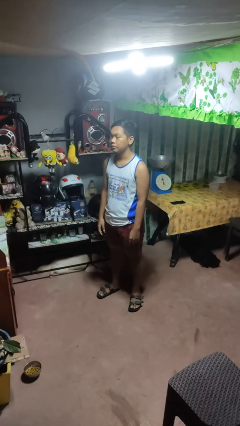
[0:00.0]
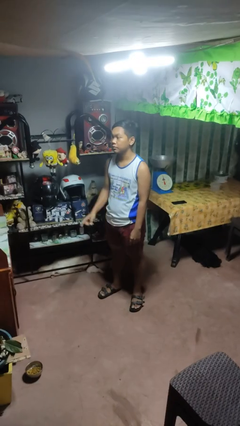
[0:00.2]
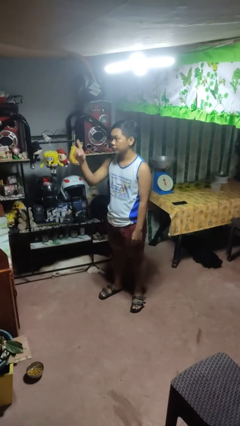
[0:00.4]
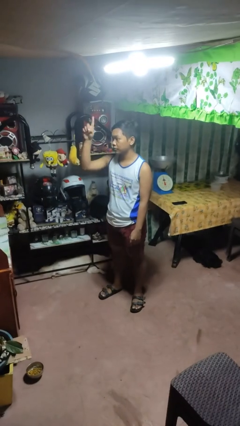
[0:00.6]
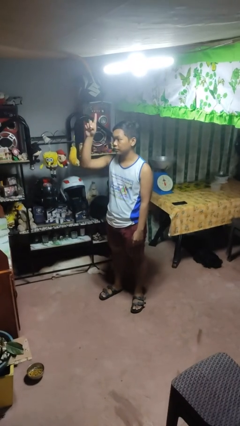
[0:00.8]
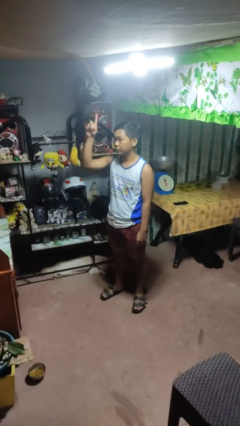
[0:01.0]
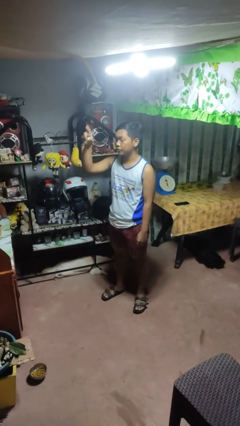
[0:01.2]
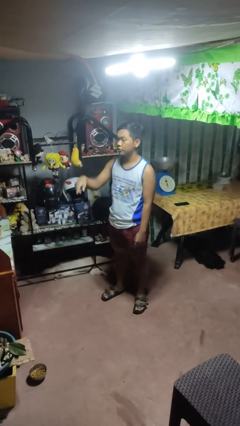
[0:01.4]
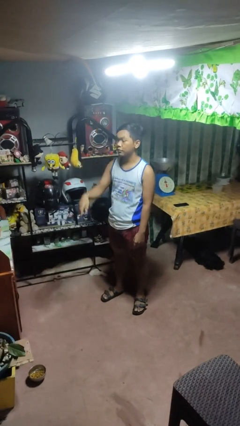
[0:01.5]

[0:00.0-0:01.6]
person gestures number one

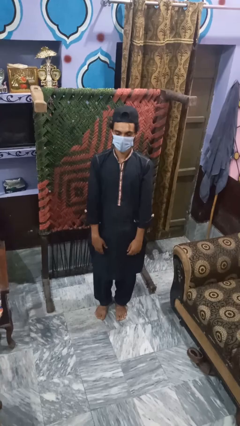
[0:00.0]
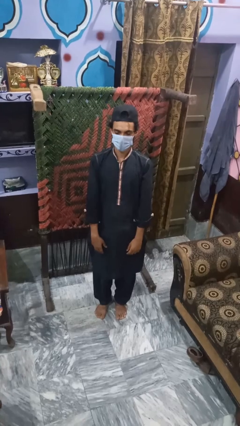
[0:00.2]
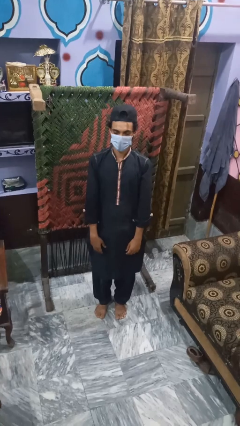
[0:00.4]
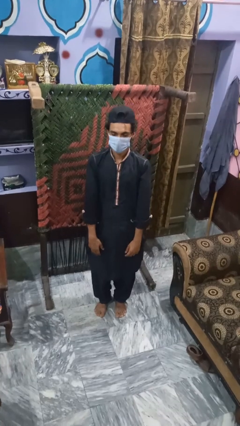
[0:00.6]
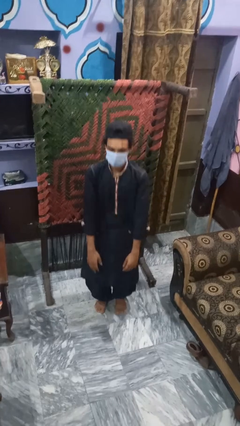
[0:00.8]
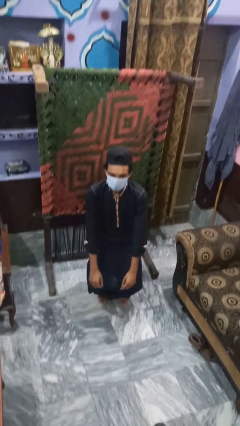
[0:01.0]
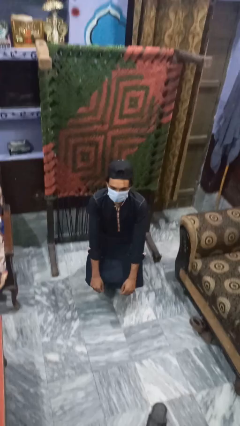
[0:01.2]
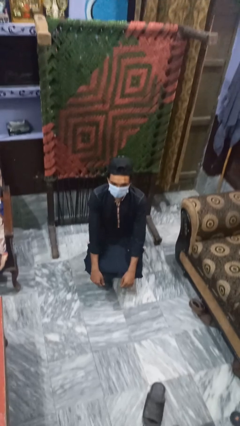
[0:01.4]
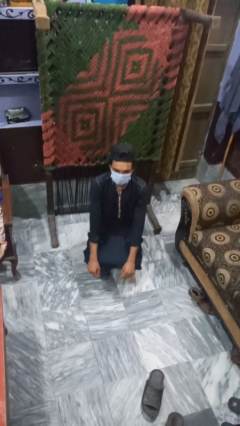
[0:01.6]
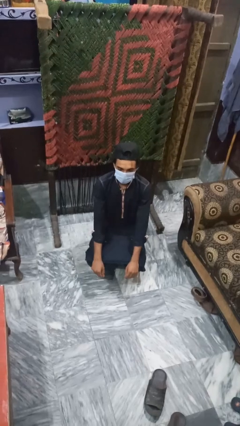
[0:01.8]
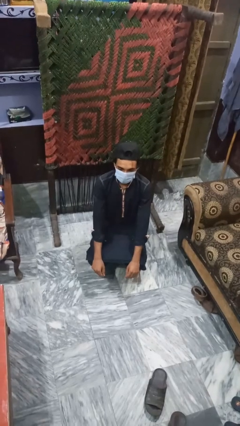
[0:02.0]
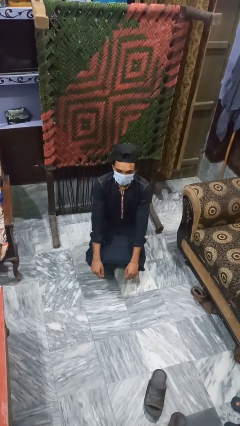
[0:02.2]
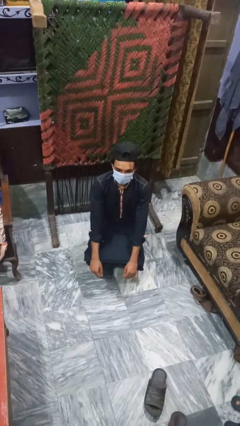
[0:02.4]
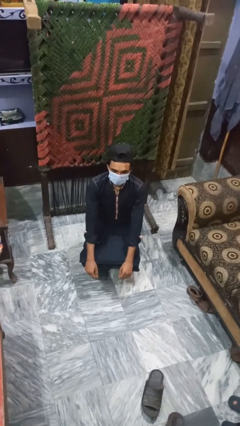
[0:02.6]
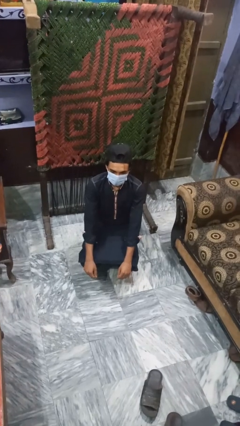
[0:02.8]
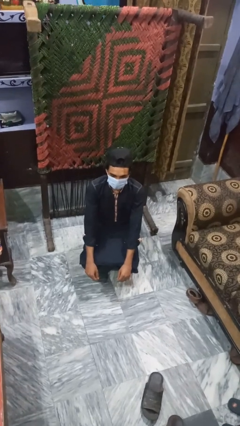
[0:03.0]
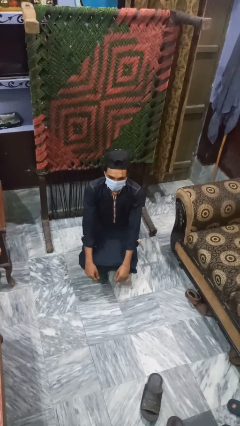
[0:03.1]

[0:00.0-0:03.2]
person squats

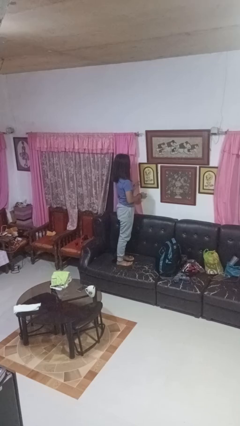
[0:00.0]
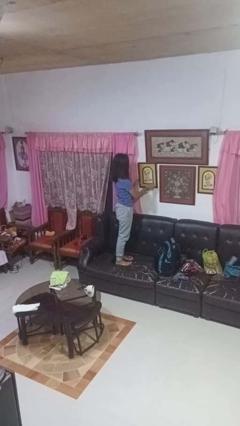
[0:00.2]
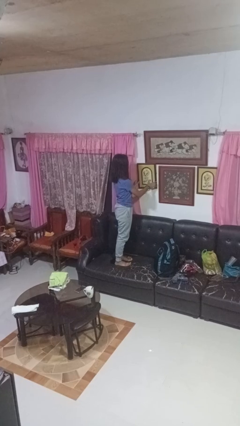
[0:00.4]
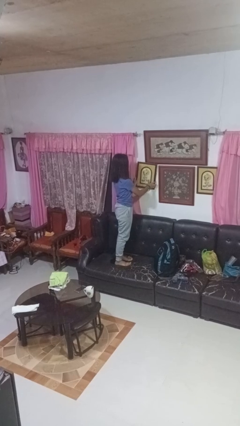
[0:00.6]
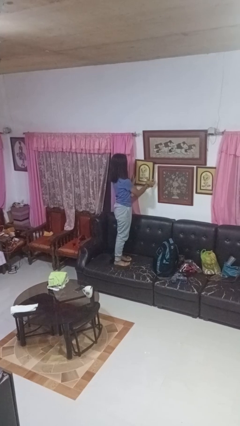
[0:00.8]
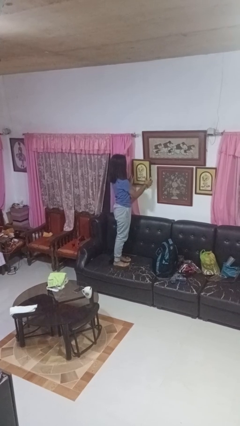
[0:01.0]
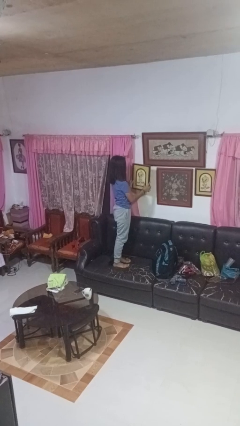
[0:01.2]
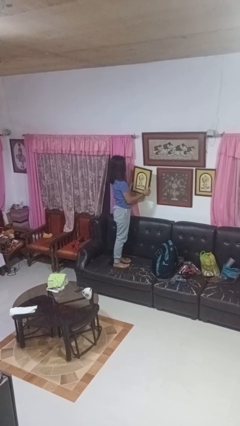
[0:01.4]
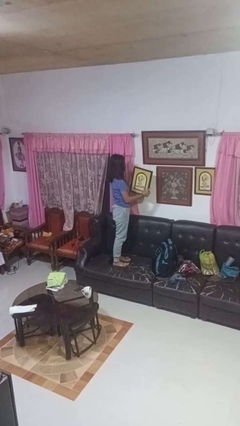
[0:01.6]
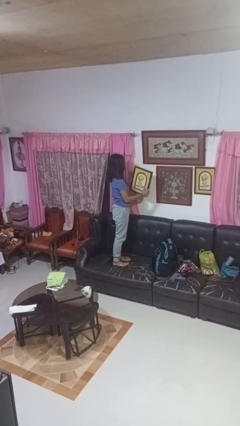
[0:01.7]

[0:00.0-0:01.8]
person takes down picture frame

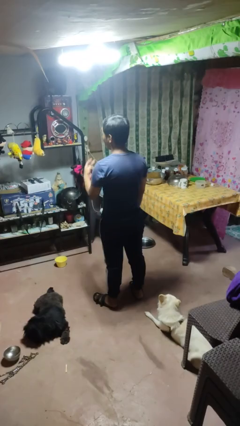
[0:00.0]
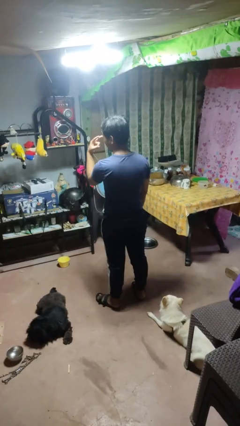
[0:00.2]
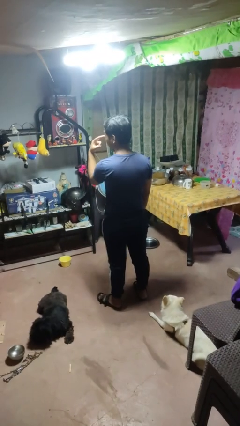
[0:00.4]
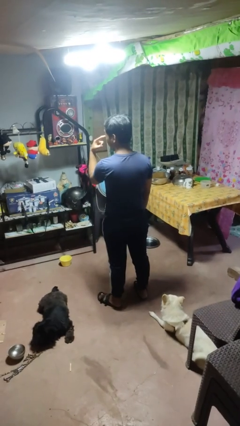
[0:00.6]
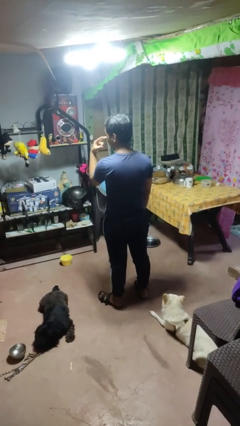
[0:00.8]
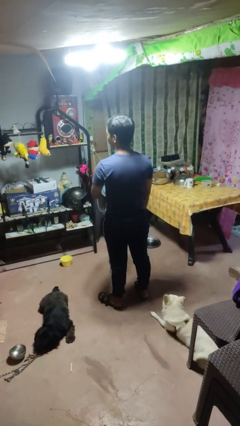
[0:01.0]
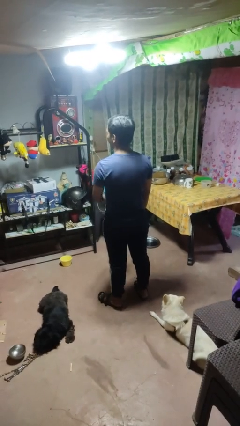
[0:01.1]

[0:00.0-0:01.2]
person gestures watch closely

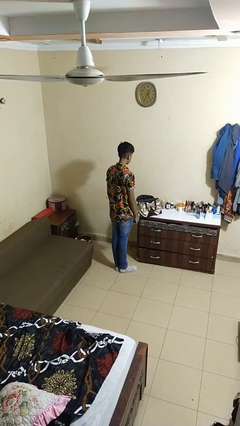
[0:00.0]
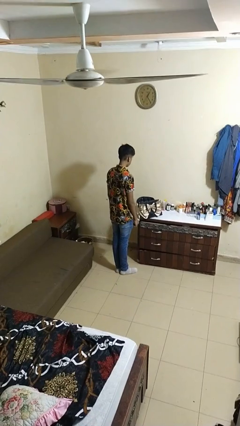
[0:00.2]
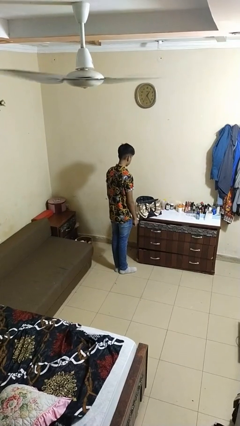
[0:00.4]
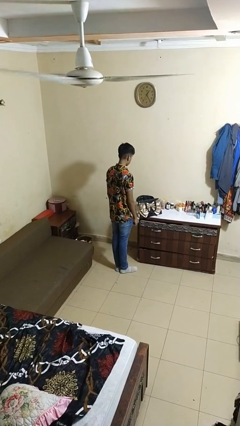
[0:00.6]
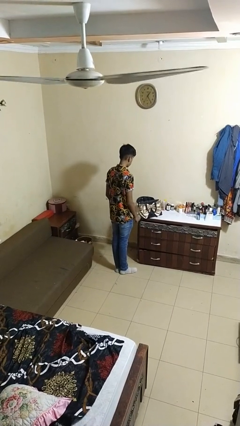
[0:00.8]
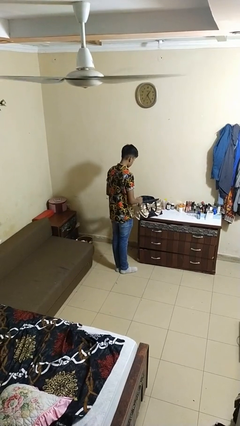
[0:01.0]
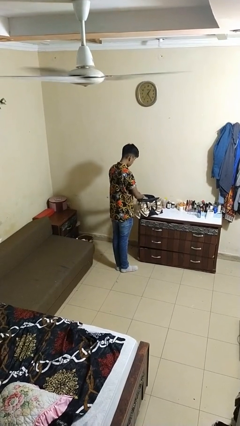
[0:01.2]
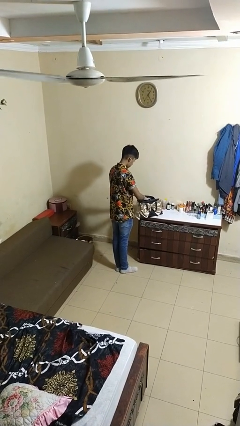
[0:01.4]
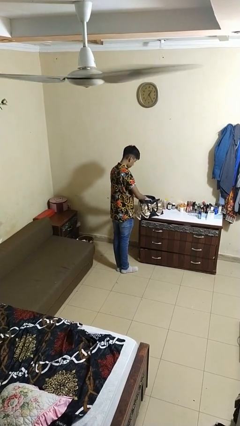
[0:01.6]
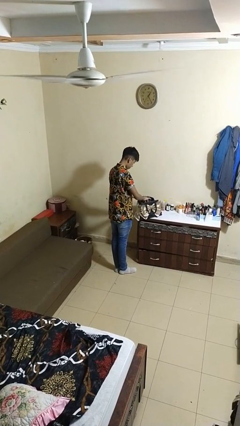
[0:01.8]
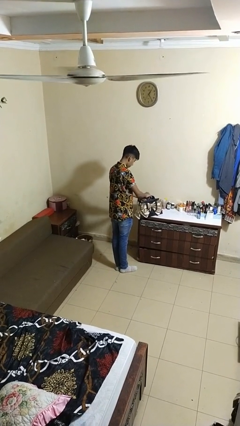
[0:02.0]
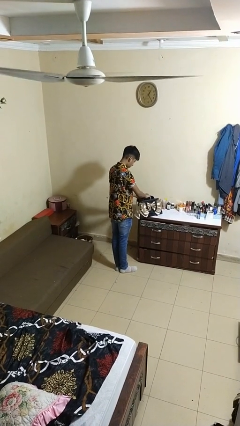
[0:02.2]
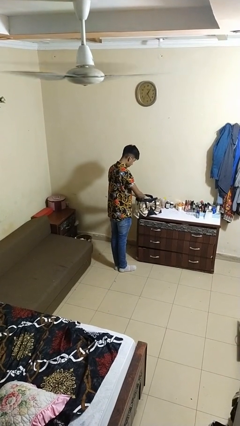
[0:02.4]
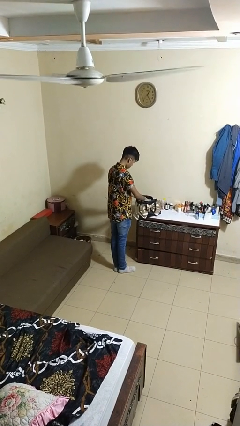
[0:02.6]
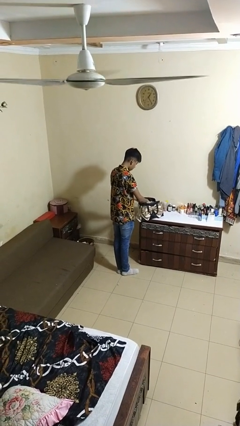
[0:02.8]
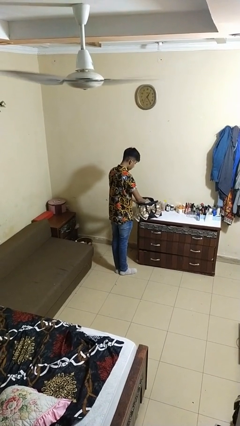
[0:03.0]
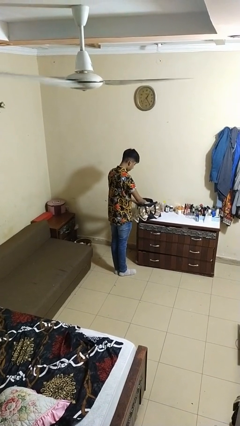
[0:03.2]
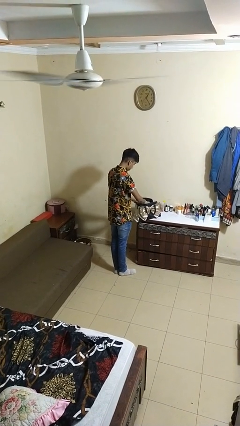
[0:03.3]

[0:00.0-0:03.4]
person searches in purse

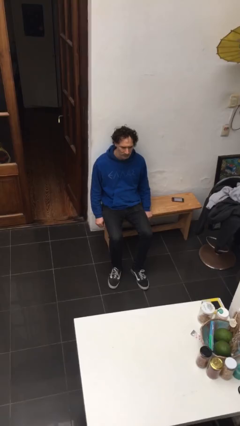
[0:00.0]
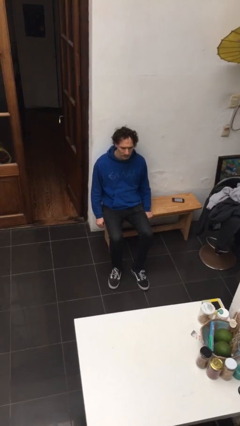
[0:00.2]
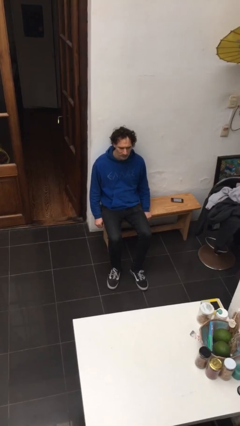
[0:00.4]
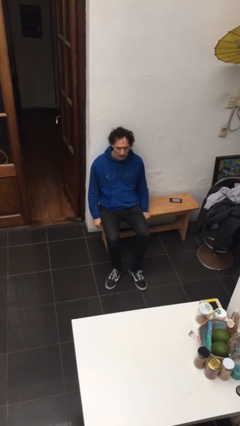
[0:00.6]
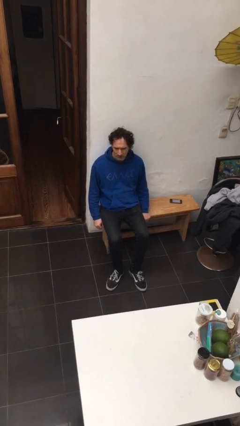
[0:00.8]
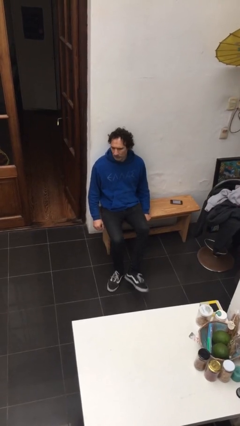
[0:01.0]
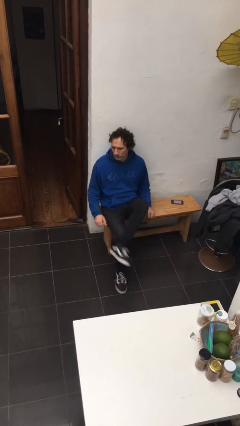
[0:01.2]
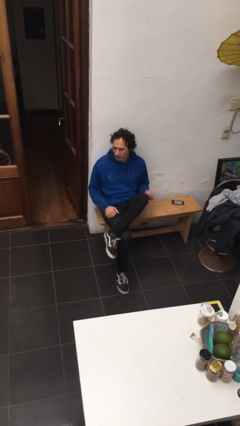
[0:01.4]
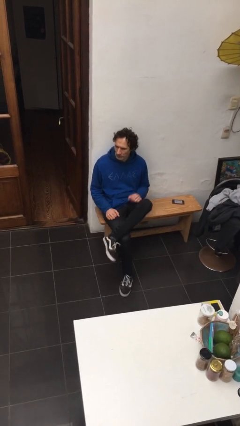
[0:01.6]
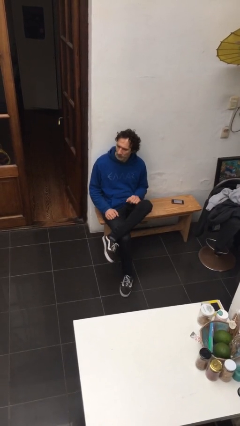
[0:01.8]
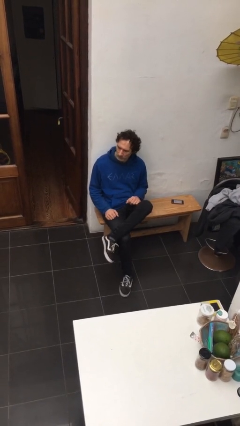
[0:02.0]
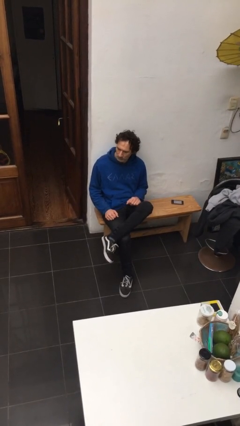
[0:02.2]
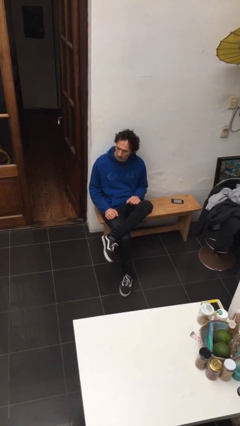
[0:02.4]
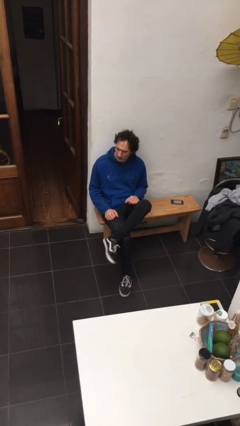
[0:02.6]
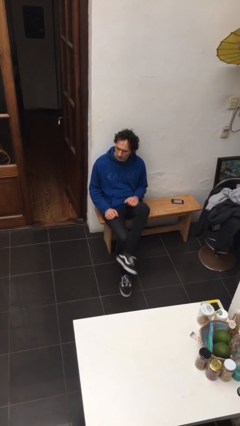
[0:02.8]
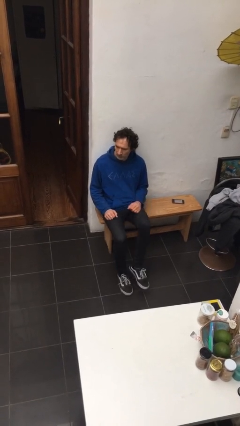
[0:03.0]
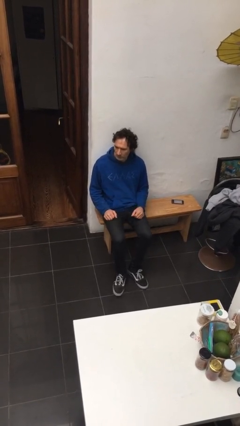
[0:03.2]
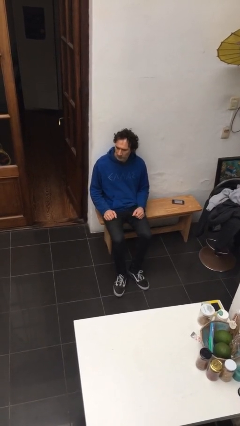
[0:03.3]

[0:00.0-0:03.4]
person crosses legs

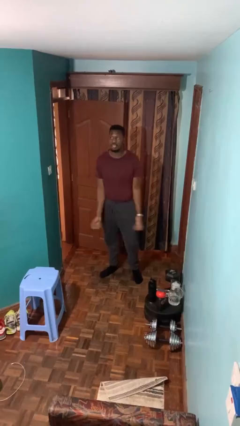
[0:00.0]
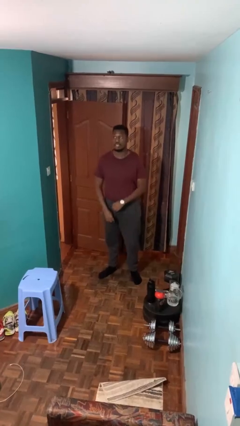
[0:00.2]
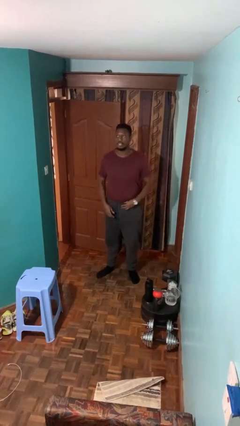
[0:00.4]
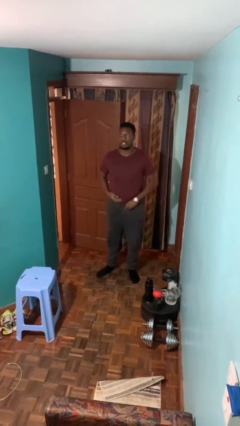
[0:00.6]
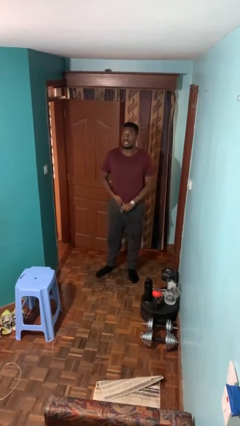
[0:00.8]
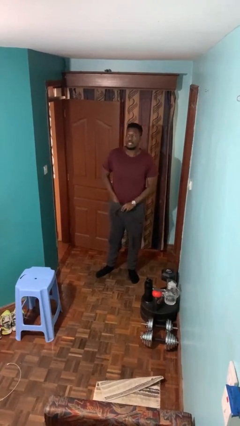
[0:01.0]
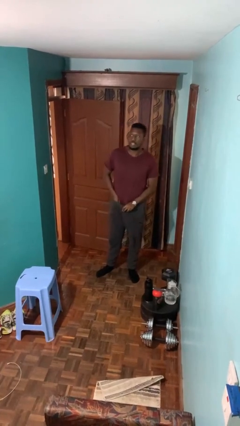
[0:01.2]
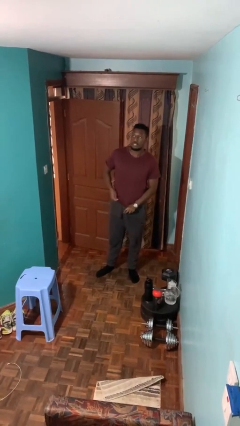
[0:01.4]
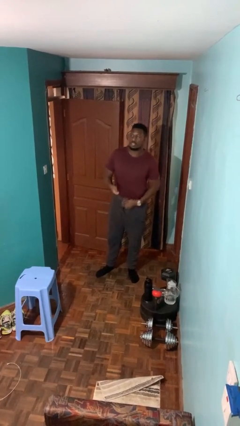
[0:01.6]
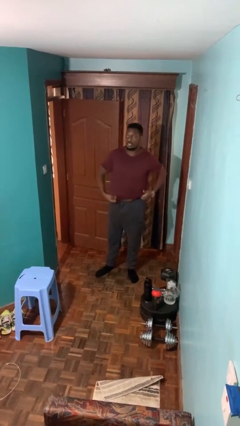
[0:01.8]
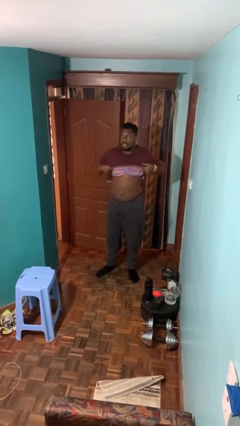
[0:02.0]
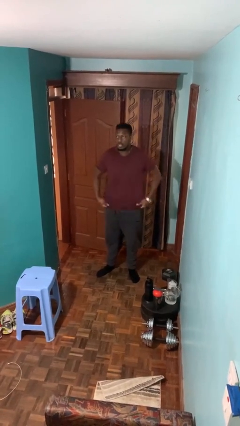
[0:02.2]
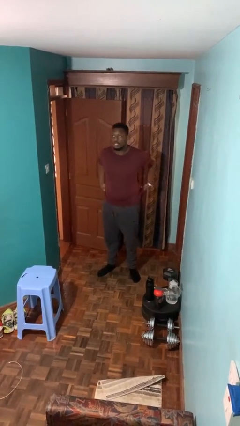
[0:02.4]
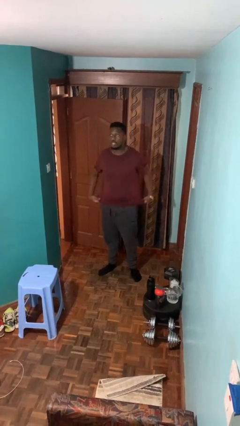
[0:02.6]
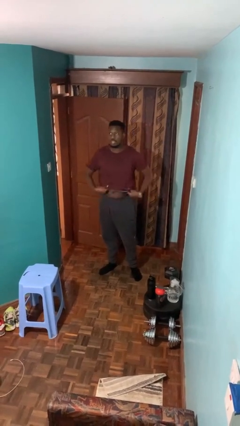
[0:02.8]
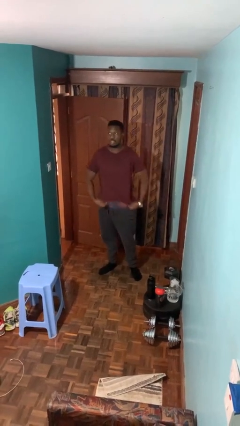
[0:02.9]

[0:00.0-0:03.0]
person untucks shirt
